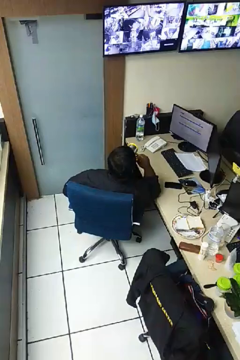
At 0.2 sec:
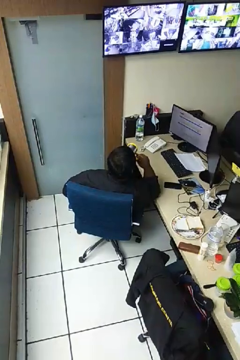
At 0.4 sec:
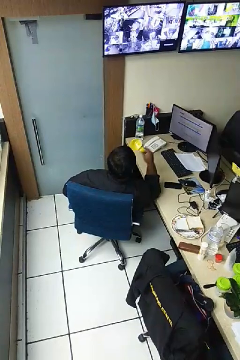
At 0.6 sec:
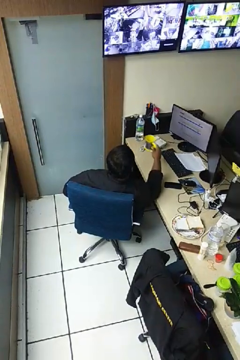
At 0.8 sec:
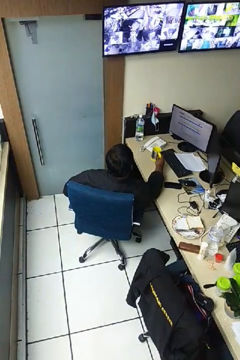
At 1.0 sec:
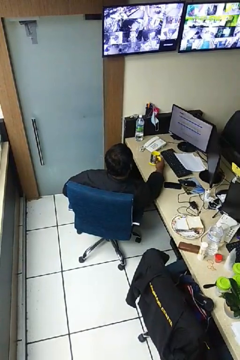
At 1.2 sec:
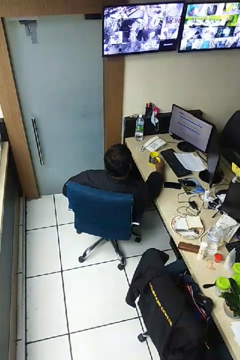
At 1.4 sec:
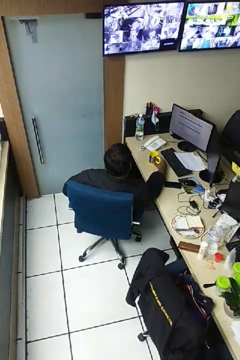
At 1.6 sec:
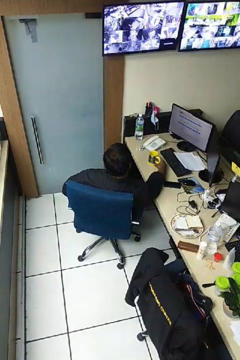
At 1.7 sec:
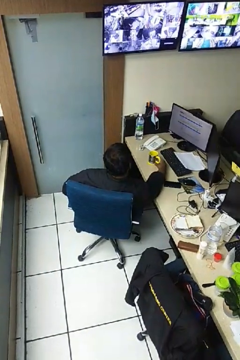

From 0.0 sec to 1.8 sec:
person puts down object on table

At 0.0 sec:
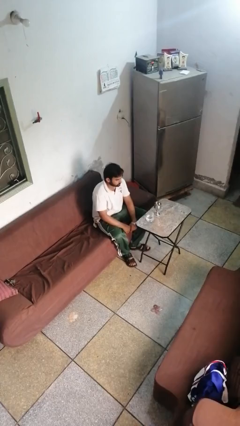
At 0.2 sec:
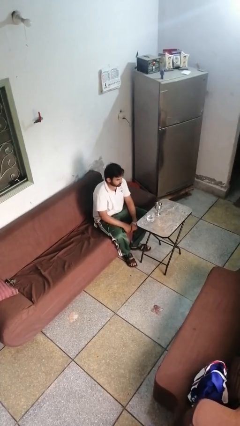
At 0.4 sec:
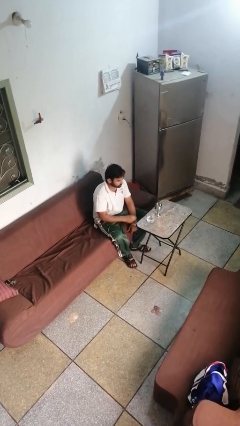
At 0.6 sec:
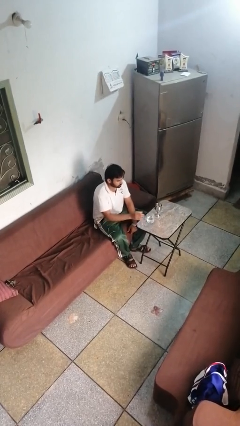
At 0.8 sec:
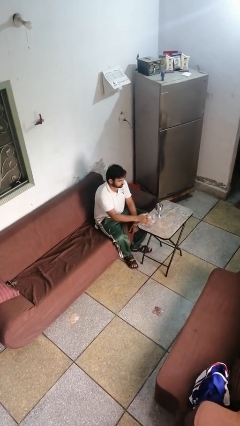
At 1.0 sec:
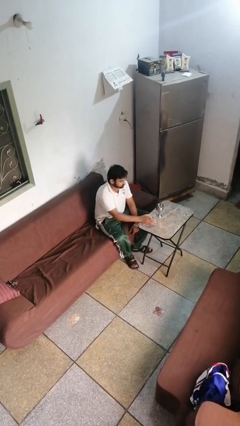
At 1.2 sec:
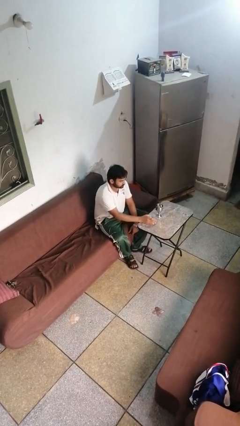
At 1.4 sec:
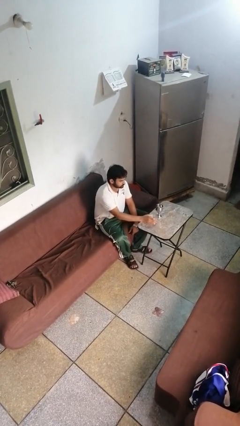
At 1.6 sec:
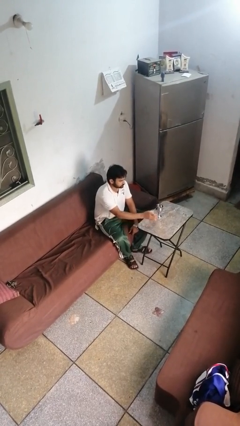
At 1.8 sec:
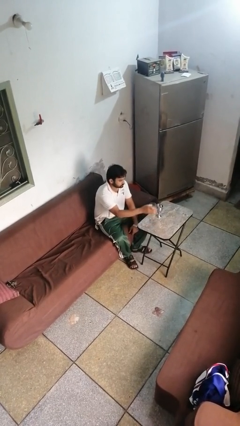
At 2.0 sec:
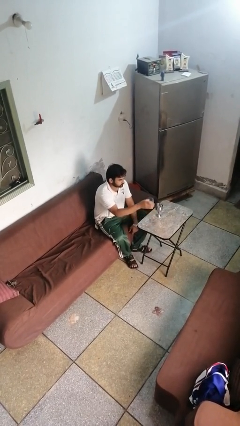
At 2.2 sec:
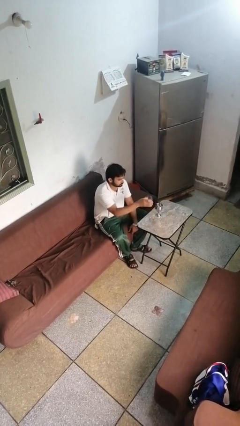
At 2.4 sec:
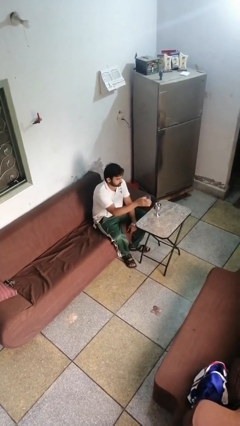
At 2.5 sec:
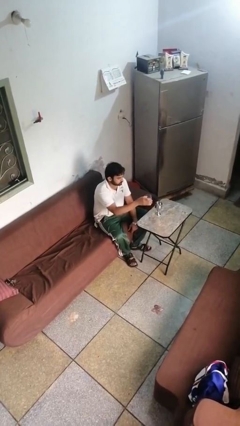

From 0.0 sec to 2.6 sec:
person picks up object from table

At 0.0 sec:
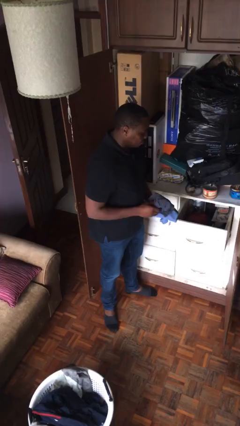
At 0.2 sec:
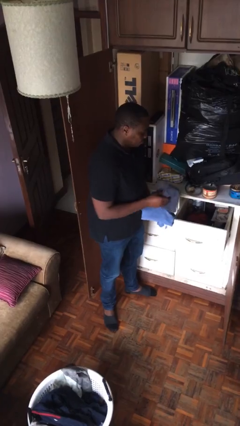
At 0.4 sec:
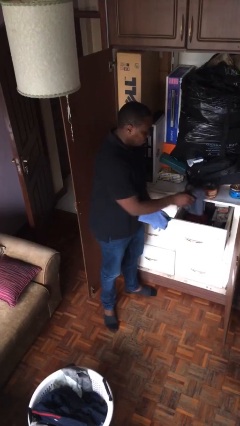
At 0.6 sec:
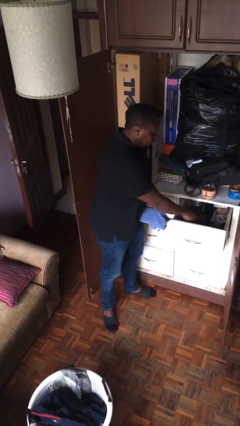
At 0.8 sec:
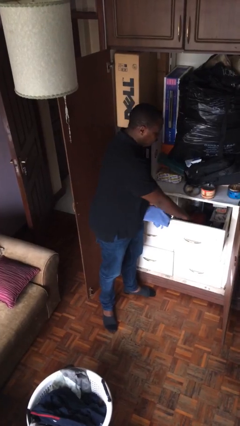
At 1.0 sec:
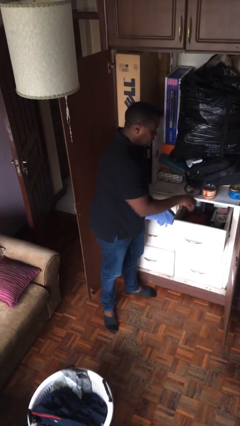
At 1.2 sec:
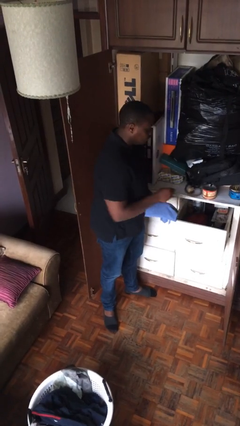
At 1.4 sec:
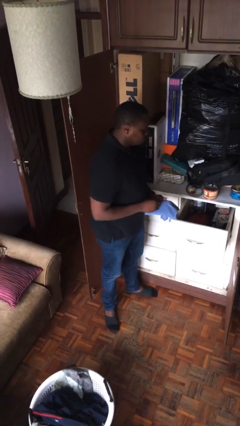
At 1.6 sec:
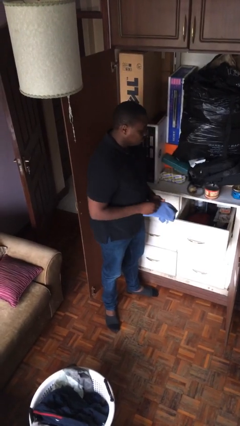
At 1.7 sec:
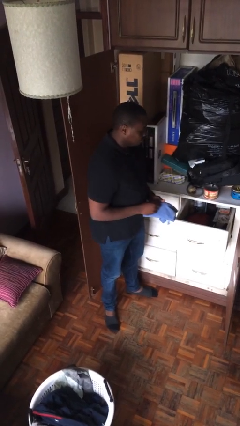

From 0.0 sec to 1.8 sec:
person puts clothes into dresser

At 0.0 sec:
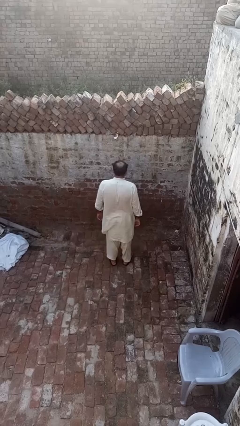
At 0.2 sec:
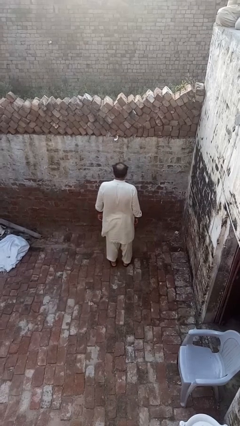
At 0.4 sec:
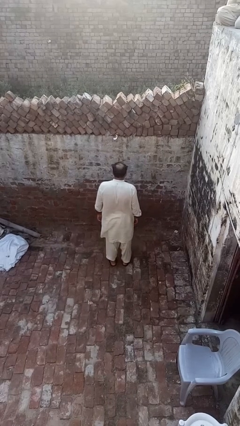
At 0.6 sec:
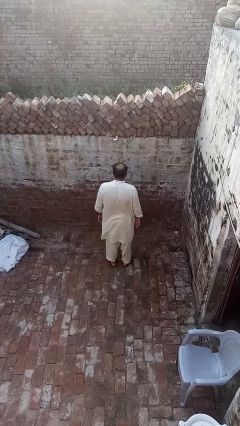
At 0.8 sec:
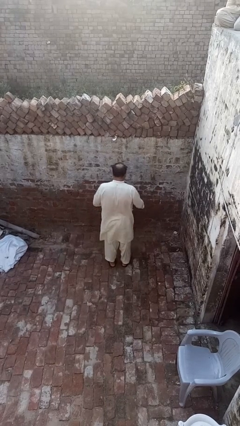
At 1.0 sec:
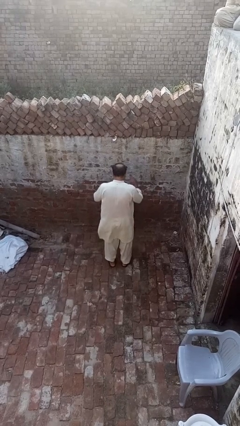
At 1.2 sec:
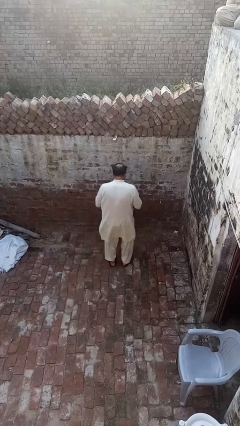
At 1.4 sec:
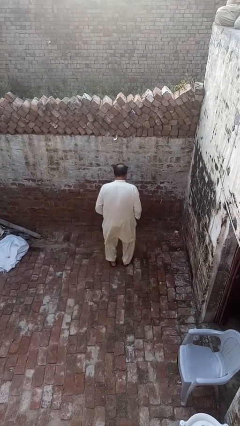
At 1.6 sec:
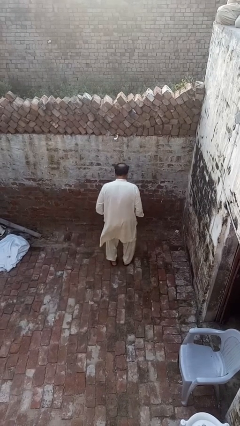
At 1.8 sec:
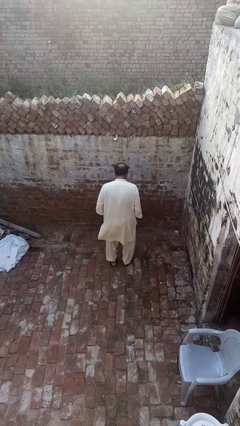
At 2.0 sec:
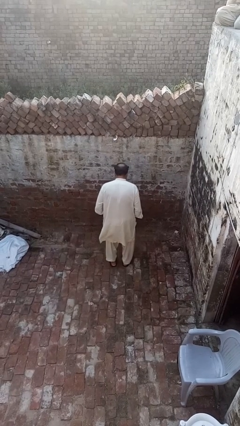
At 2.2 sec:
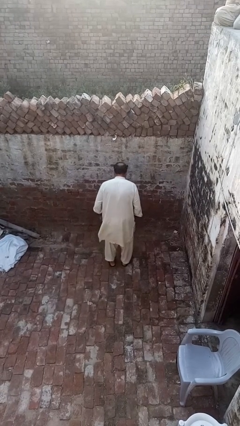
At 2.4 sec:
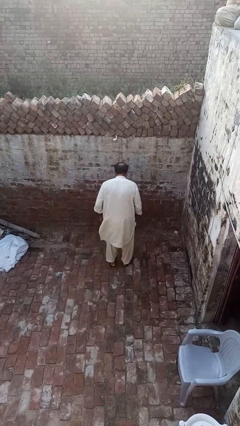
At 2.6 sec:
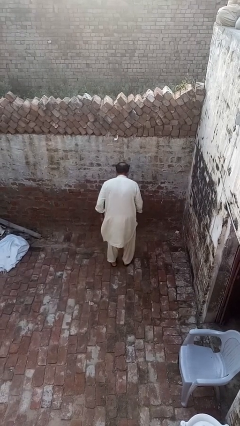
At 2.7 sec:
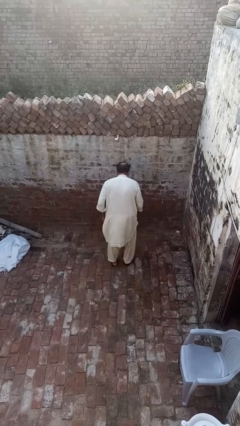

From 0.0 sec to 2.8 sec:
person slaps hands on thighs

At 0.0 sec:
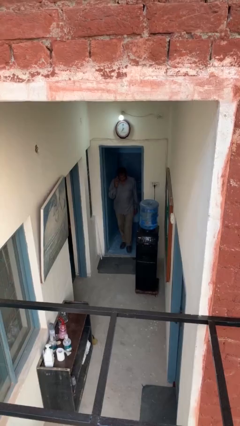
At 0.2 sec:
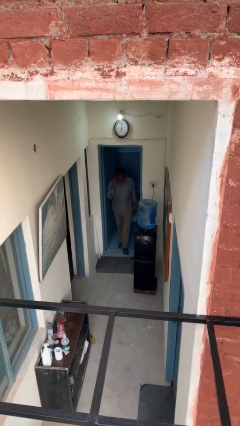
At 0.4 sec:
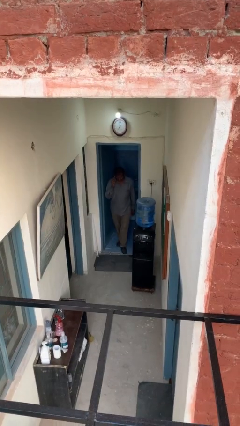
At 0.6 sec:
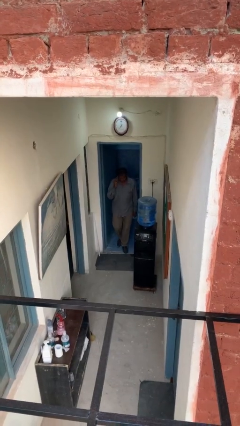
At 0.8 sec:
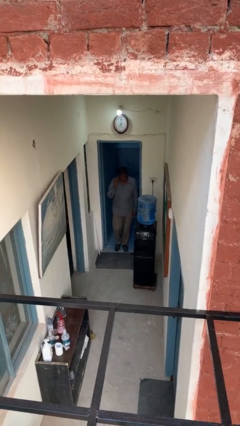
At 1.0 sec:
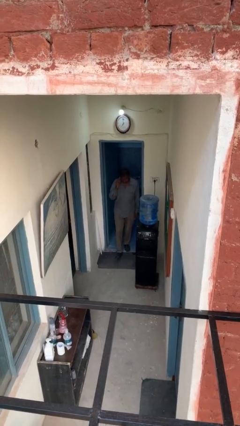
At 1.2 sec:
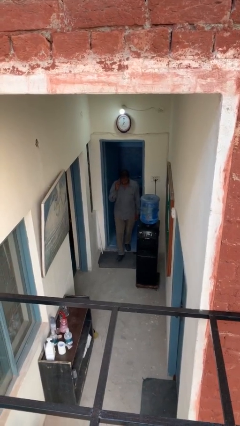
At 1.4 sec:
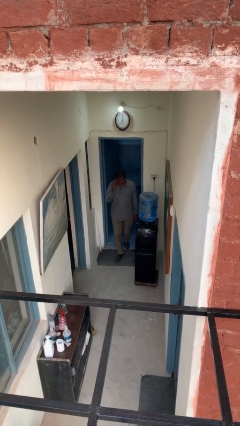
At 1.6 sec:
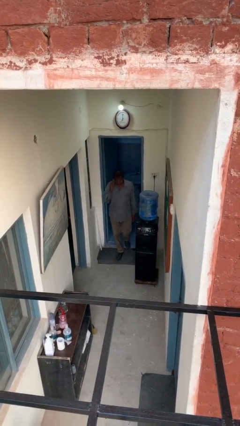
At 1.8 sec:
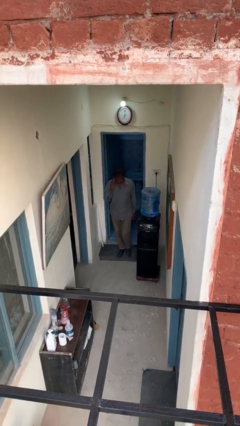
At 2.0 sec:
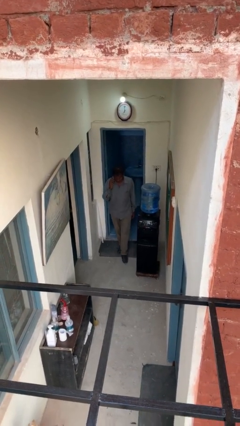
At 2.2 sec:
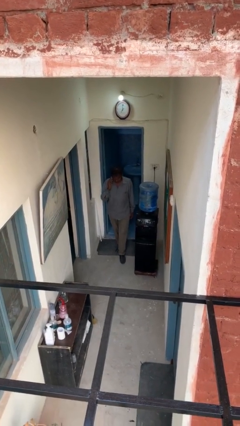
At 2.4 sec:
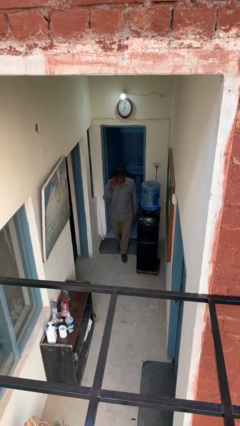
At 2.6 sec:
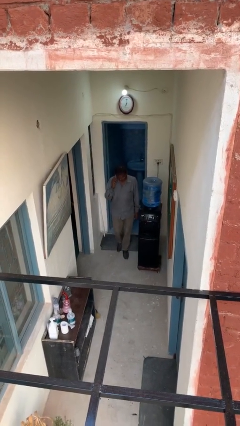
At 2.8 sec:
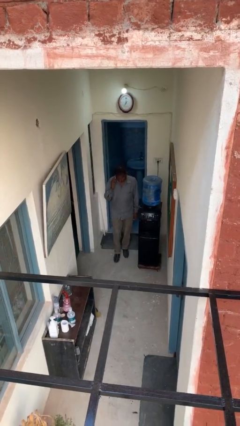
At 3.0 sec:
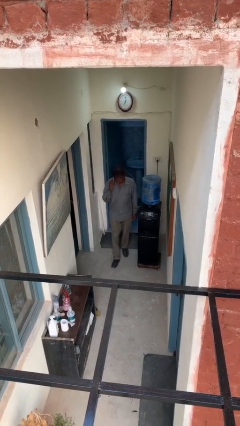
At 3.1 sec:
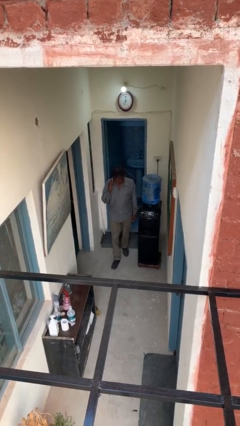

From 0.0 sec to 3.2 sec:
person enters scene through structure

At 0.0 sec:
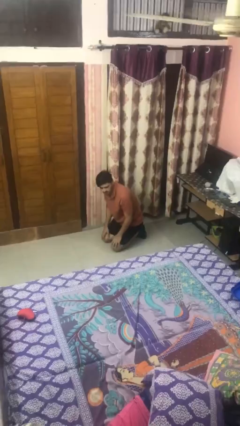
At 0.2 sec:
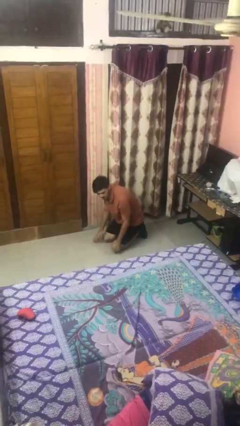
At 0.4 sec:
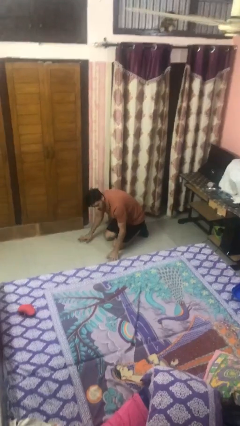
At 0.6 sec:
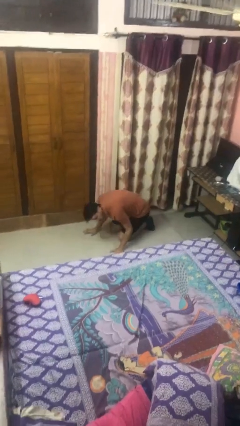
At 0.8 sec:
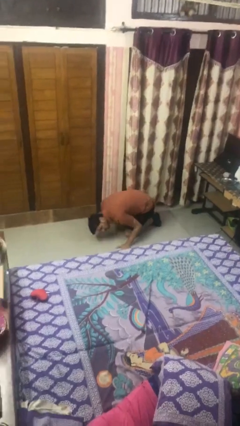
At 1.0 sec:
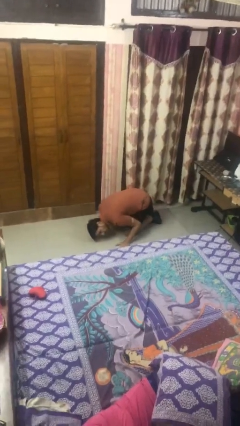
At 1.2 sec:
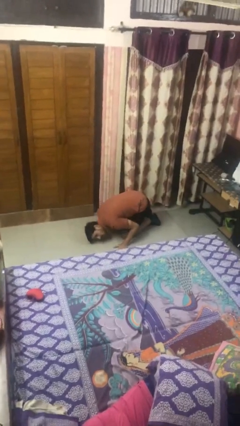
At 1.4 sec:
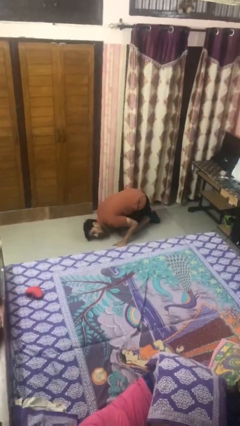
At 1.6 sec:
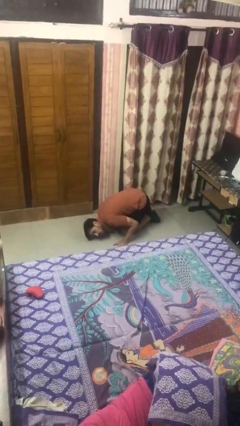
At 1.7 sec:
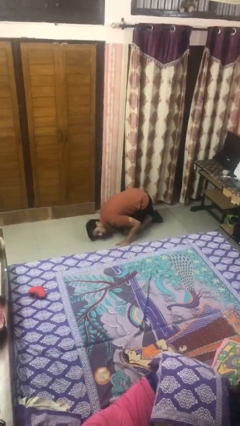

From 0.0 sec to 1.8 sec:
person searches under bed

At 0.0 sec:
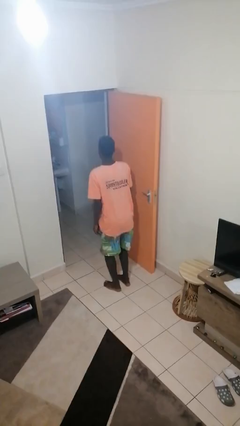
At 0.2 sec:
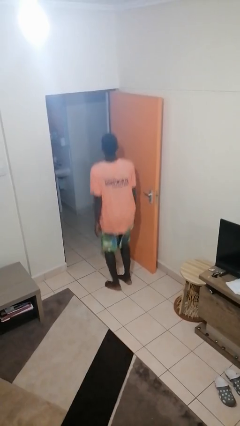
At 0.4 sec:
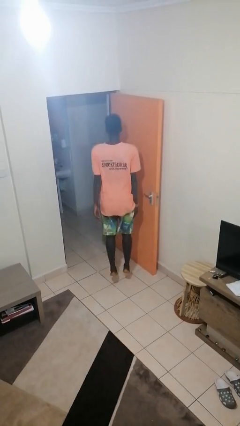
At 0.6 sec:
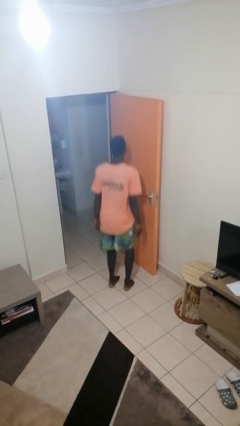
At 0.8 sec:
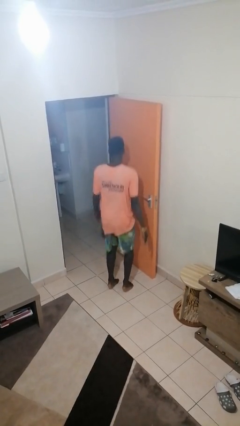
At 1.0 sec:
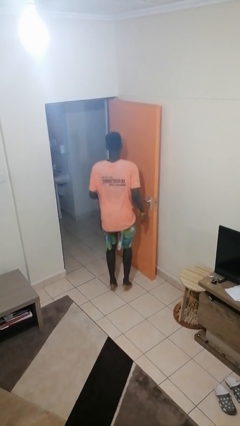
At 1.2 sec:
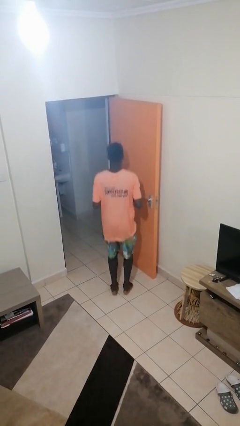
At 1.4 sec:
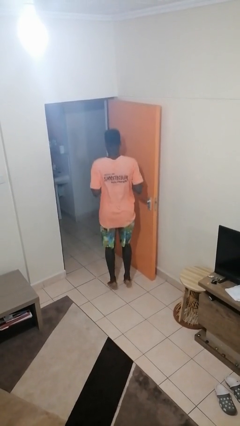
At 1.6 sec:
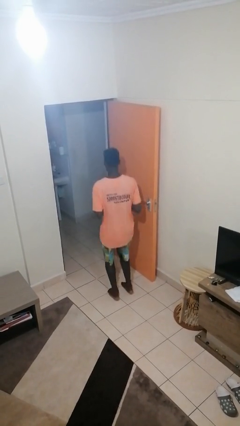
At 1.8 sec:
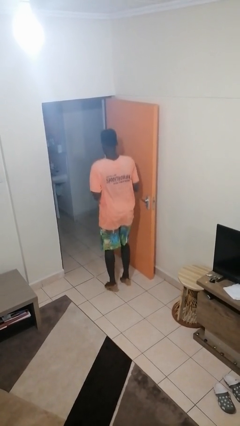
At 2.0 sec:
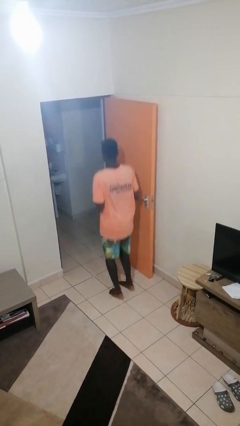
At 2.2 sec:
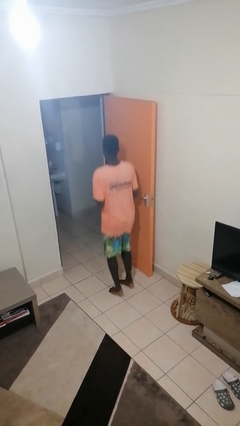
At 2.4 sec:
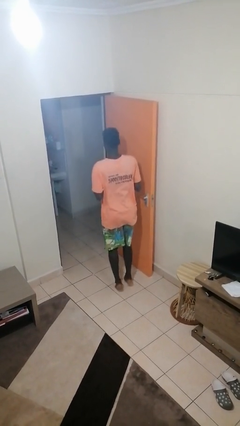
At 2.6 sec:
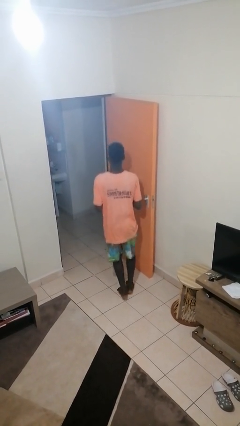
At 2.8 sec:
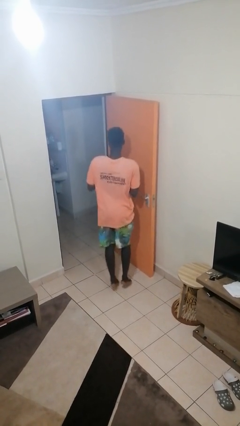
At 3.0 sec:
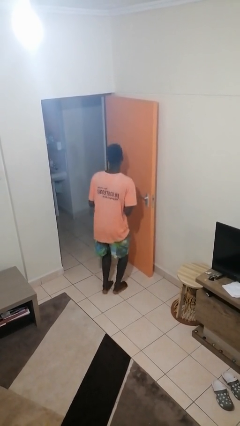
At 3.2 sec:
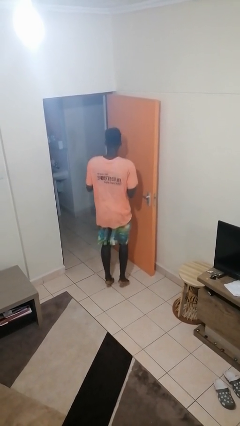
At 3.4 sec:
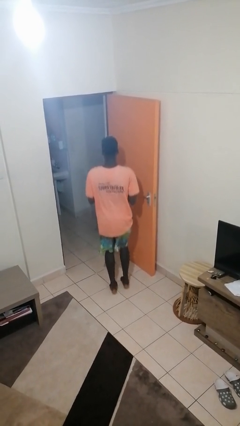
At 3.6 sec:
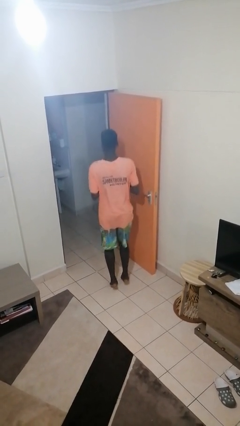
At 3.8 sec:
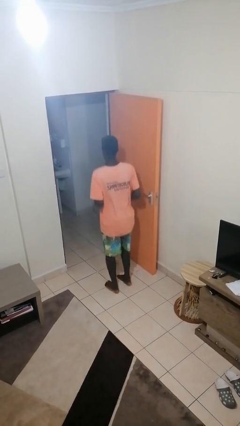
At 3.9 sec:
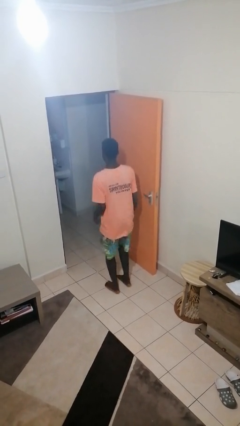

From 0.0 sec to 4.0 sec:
person jumps
